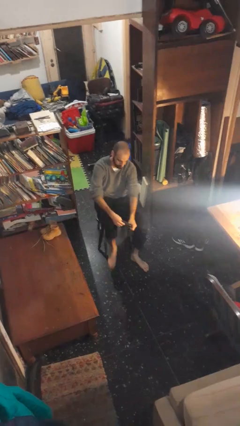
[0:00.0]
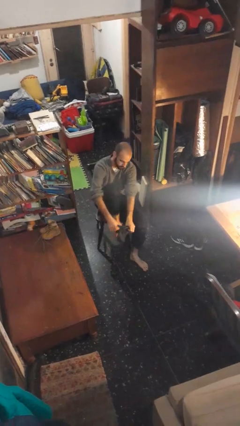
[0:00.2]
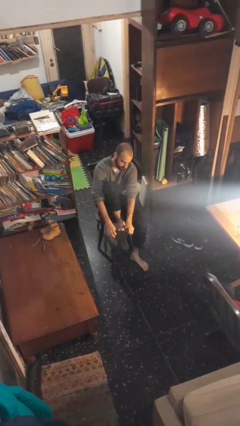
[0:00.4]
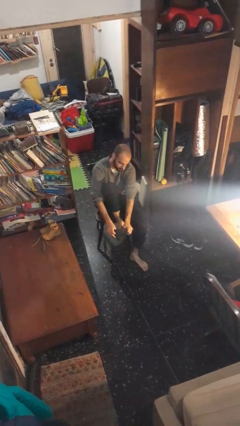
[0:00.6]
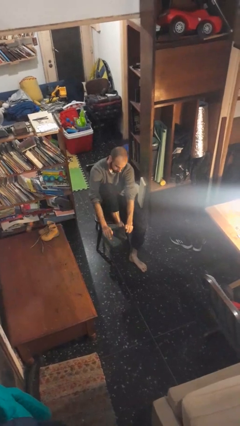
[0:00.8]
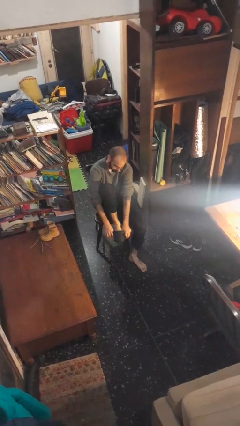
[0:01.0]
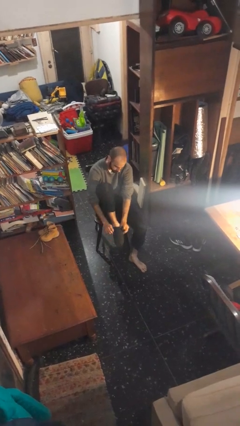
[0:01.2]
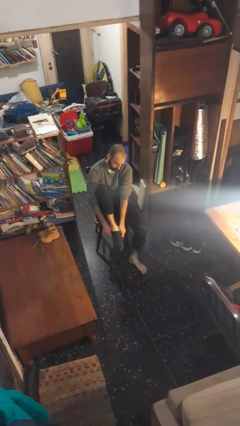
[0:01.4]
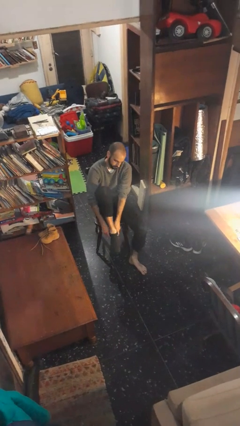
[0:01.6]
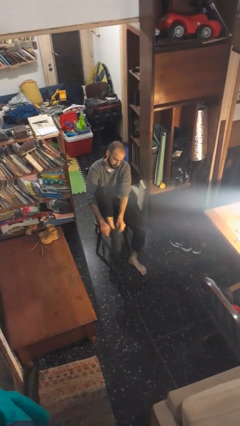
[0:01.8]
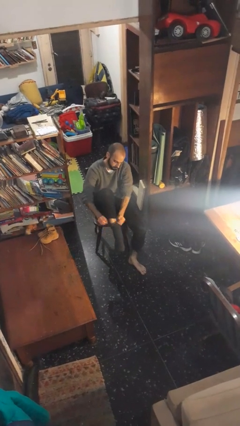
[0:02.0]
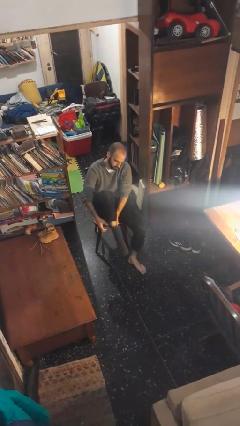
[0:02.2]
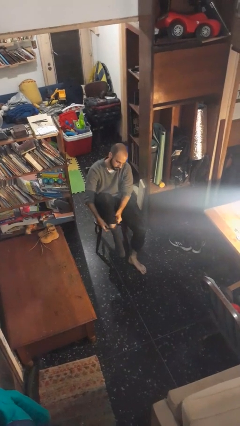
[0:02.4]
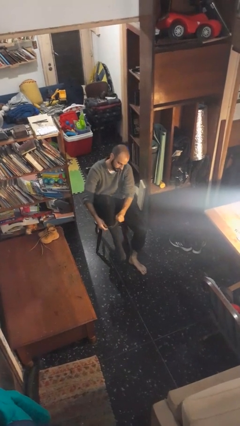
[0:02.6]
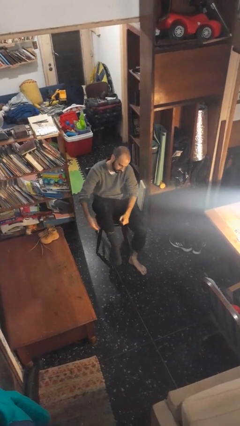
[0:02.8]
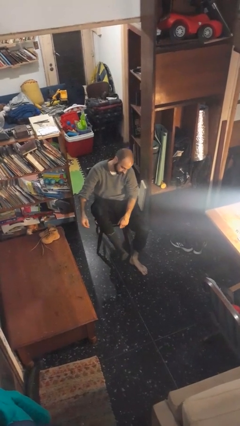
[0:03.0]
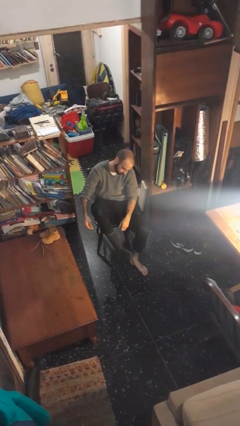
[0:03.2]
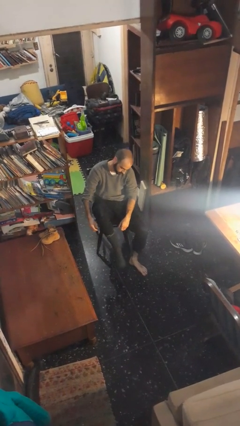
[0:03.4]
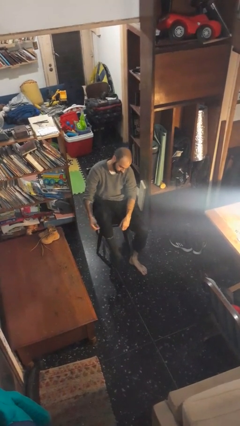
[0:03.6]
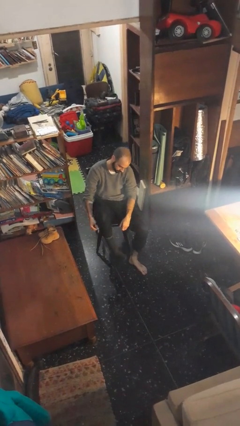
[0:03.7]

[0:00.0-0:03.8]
person puts on socks

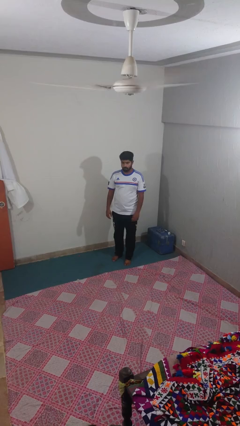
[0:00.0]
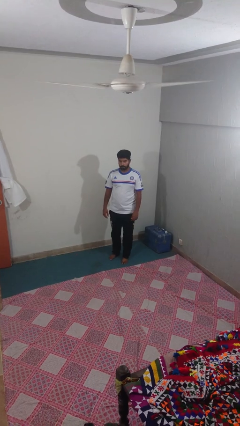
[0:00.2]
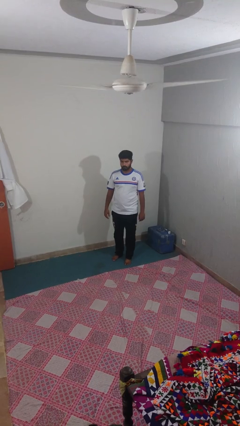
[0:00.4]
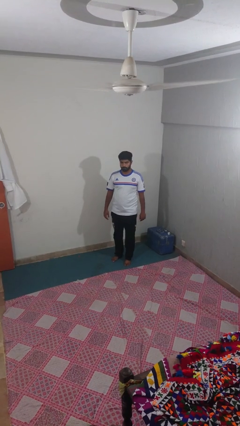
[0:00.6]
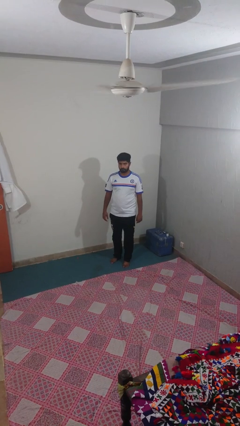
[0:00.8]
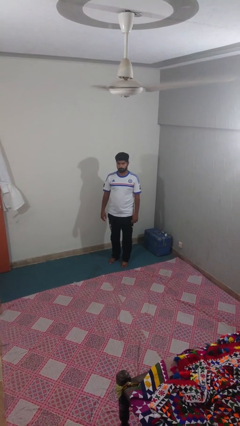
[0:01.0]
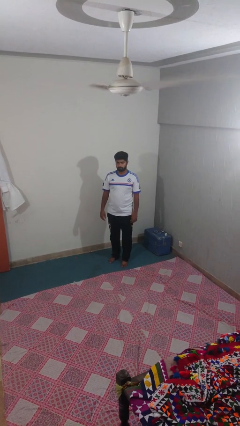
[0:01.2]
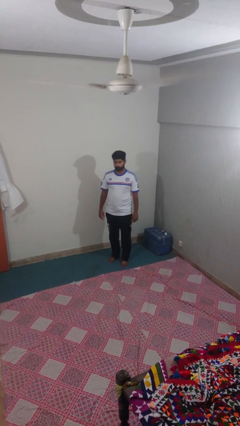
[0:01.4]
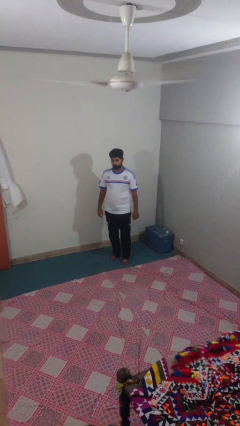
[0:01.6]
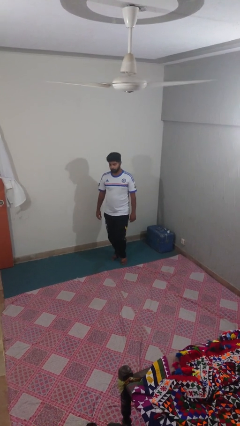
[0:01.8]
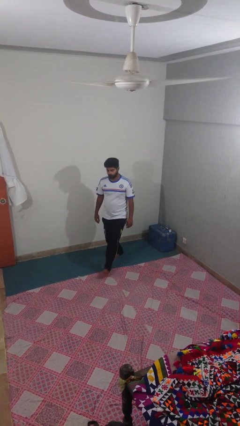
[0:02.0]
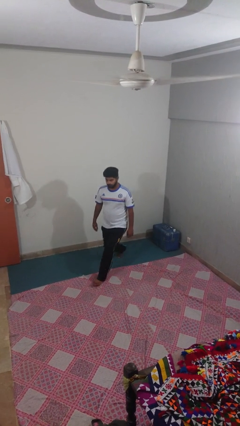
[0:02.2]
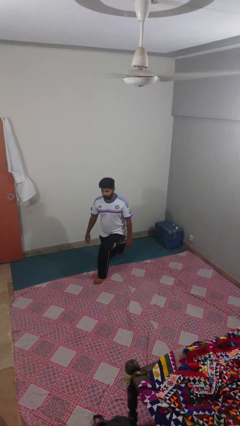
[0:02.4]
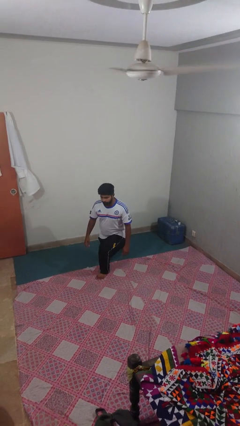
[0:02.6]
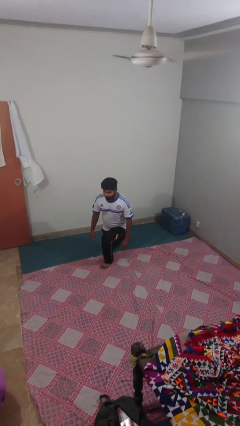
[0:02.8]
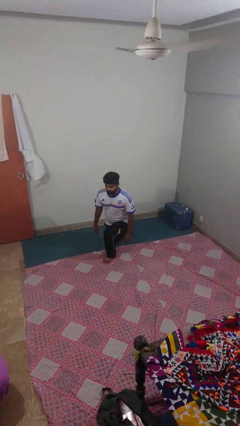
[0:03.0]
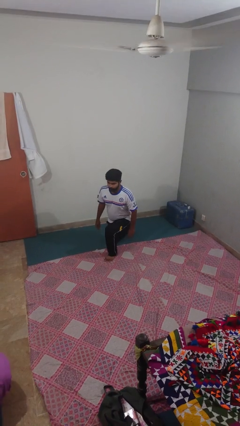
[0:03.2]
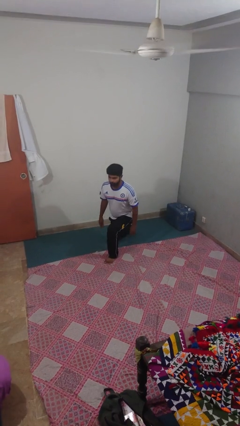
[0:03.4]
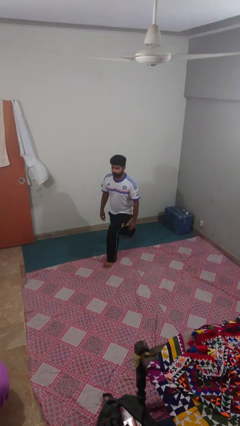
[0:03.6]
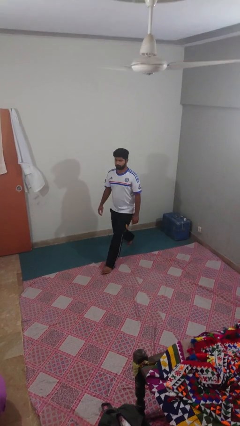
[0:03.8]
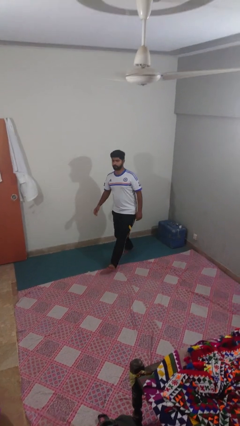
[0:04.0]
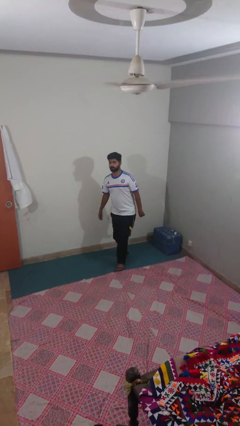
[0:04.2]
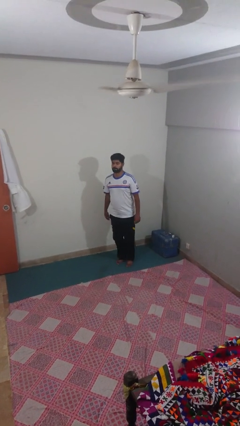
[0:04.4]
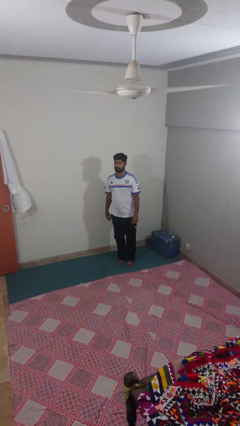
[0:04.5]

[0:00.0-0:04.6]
person exercises with lunges

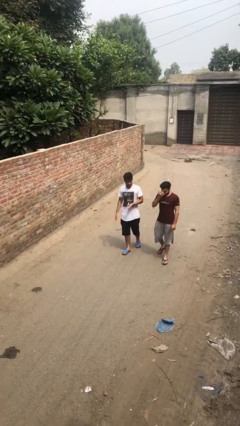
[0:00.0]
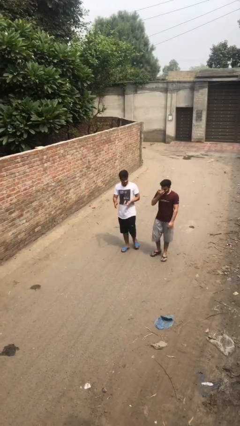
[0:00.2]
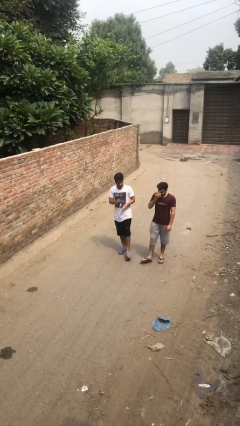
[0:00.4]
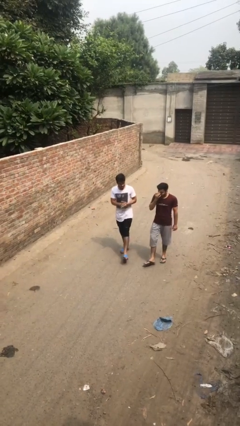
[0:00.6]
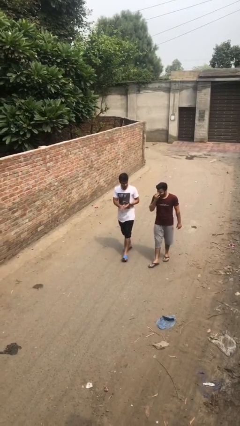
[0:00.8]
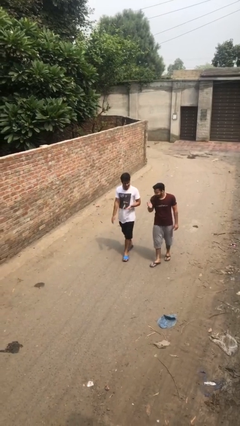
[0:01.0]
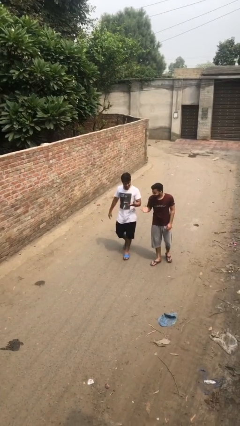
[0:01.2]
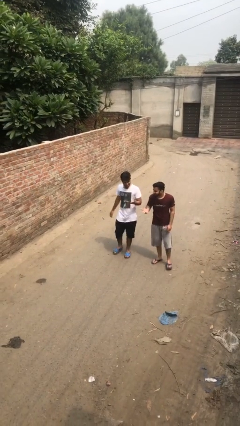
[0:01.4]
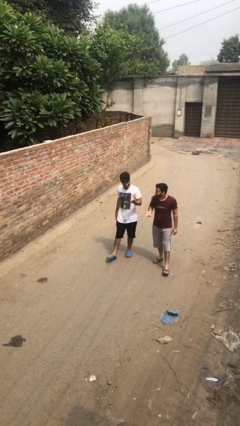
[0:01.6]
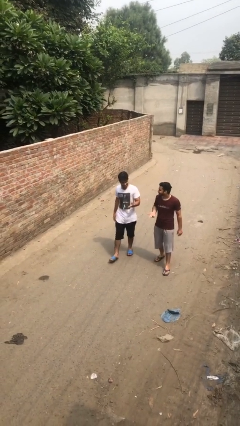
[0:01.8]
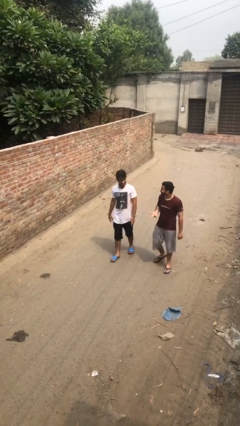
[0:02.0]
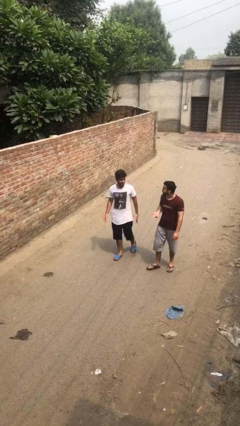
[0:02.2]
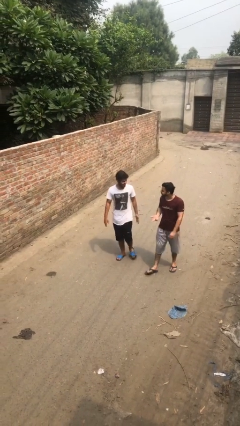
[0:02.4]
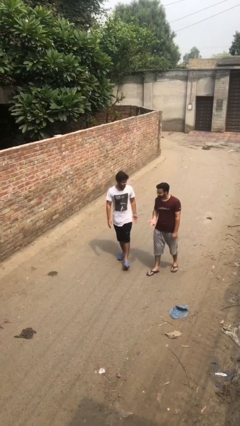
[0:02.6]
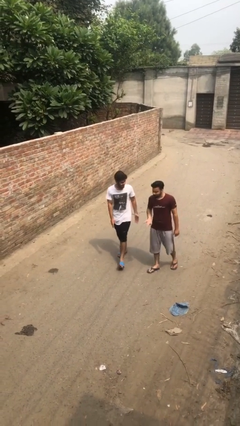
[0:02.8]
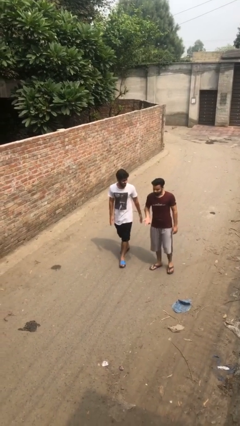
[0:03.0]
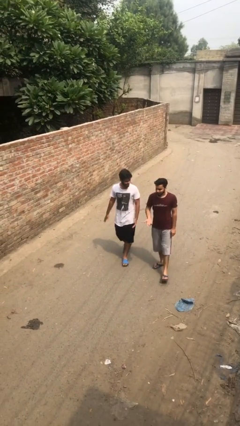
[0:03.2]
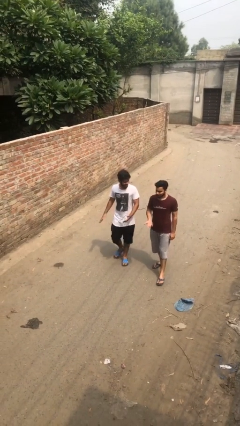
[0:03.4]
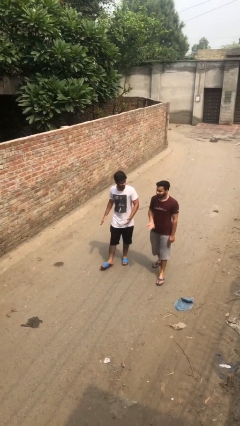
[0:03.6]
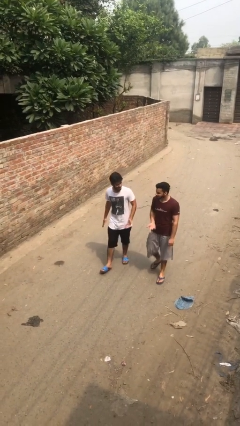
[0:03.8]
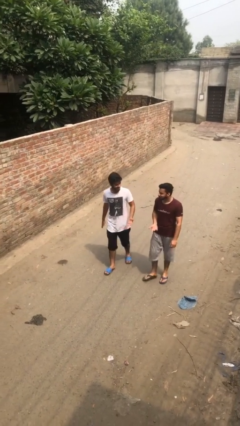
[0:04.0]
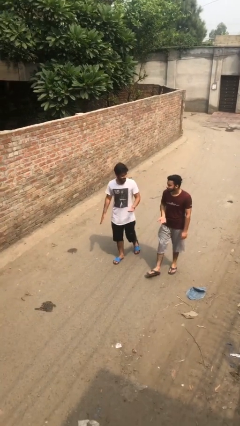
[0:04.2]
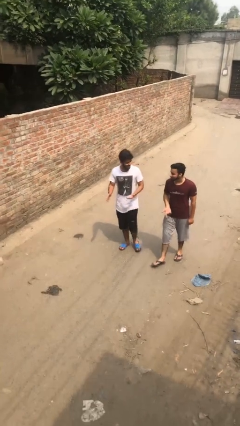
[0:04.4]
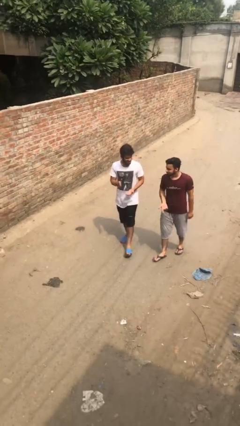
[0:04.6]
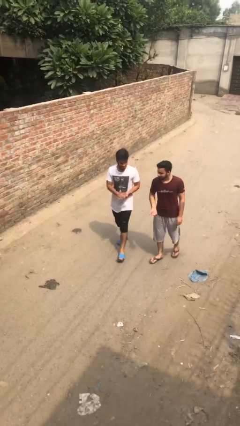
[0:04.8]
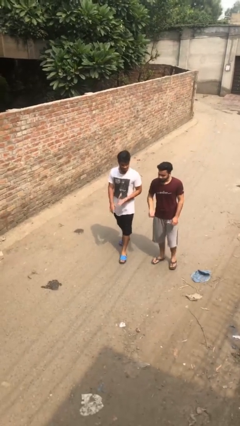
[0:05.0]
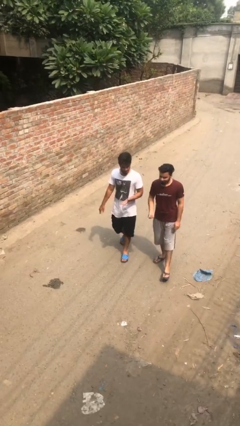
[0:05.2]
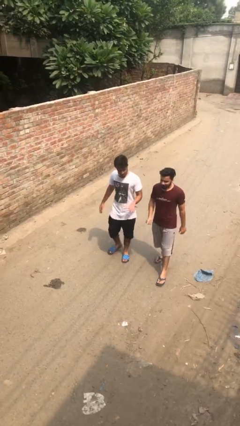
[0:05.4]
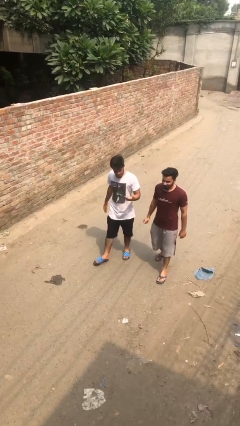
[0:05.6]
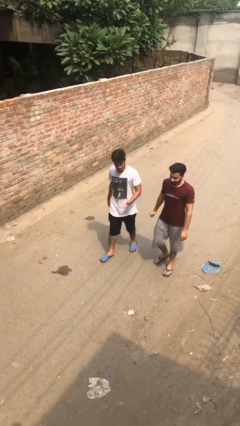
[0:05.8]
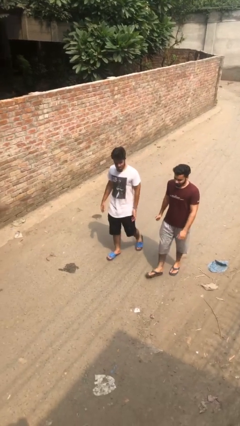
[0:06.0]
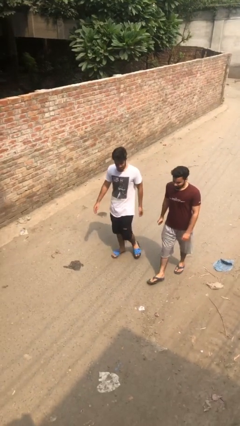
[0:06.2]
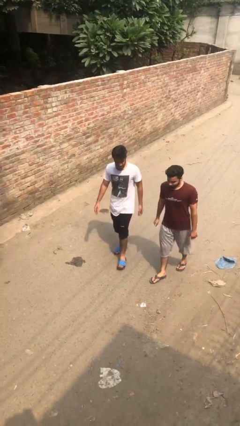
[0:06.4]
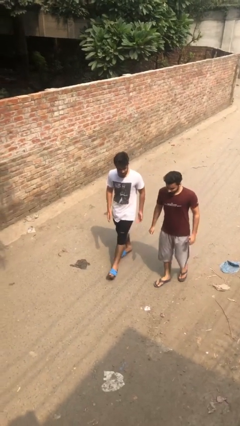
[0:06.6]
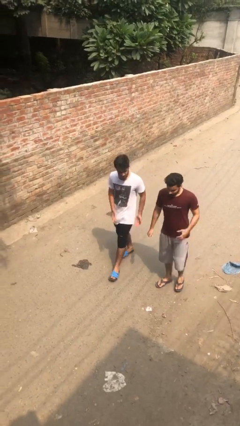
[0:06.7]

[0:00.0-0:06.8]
person talks to person

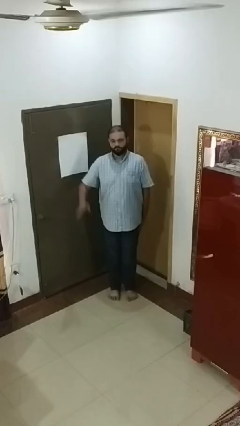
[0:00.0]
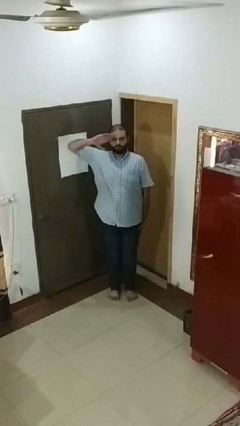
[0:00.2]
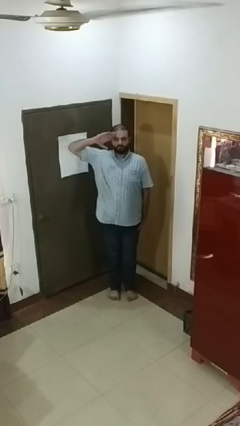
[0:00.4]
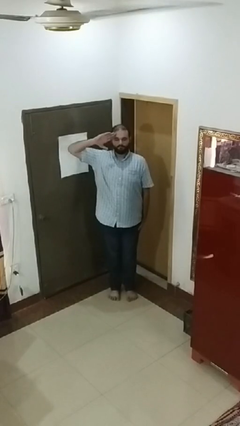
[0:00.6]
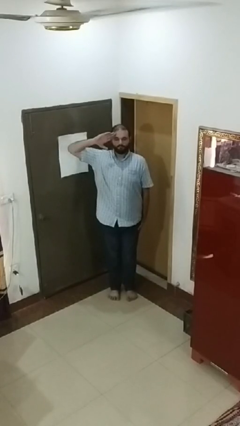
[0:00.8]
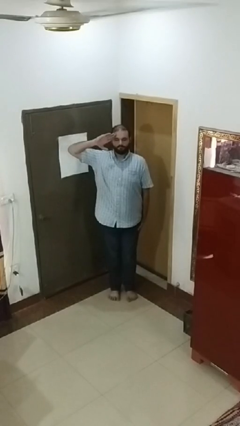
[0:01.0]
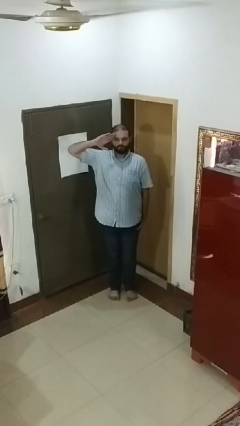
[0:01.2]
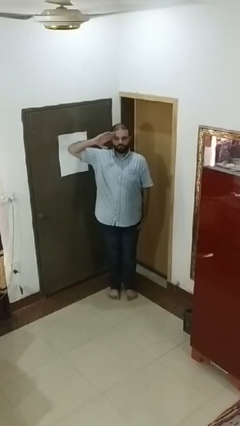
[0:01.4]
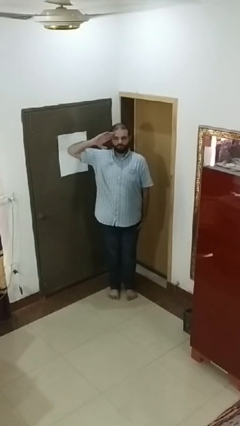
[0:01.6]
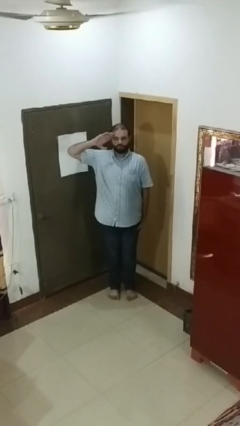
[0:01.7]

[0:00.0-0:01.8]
person salutes

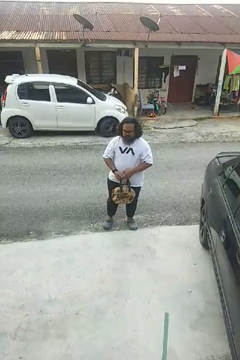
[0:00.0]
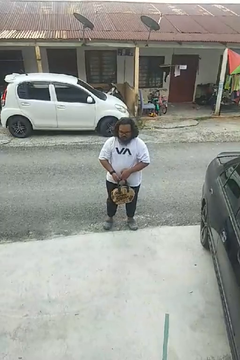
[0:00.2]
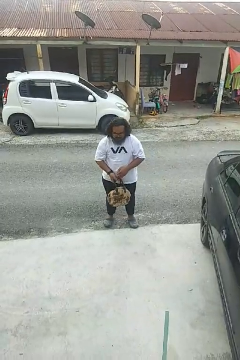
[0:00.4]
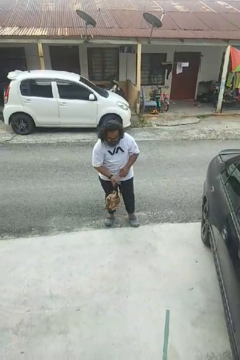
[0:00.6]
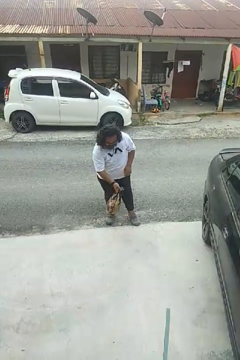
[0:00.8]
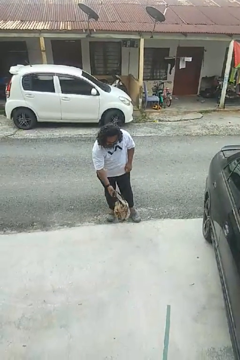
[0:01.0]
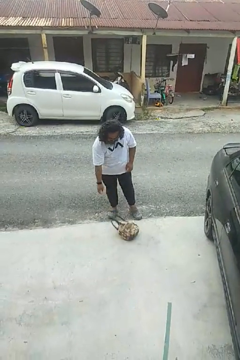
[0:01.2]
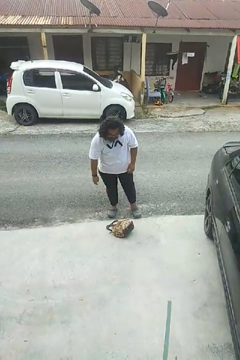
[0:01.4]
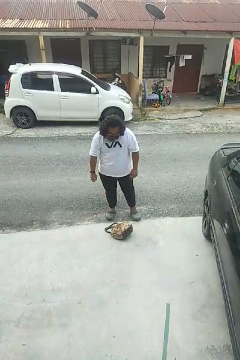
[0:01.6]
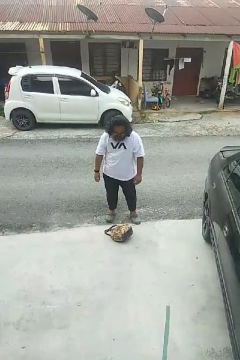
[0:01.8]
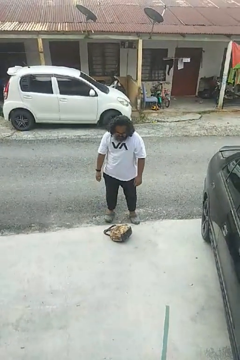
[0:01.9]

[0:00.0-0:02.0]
person drops object
